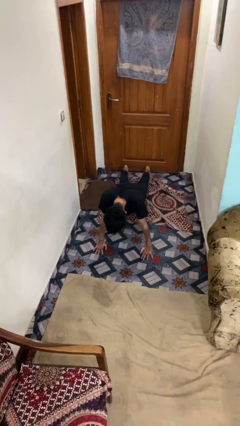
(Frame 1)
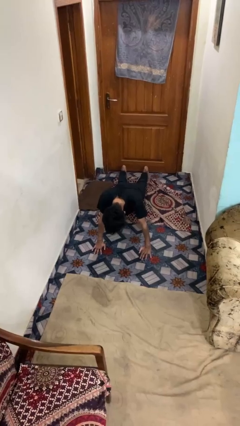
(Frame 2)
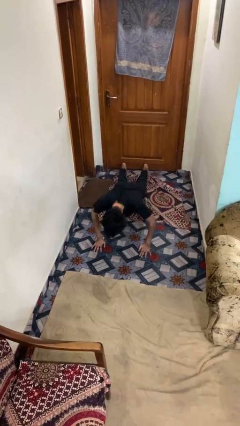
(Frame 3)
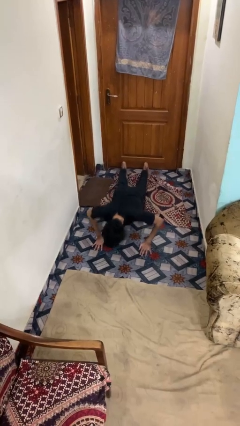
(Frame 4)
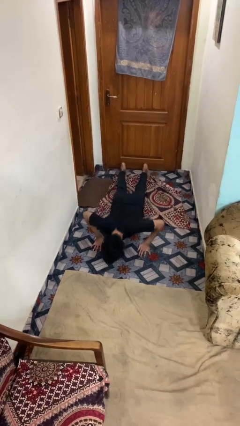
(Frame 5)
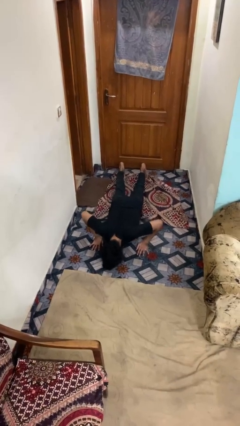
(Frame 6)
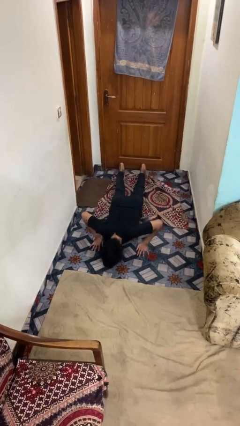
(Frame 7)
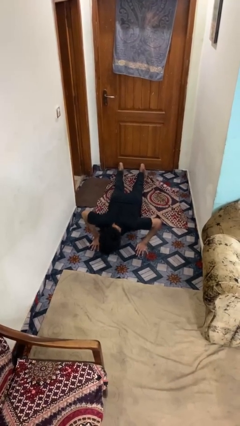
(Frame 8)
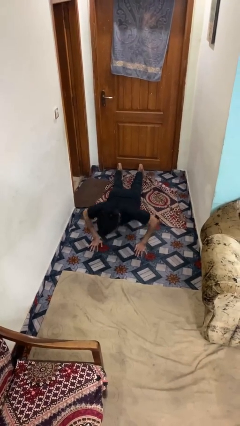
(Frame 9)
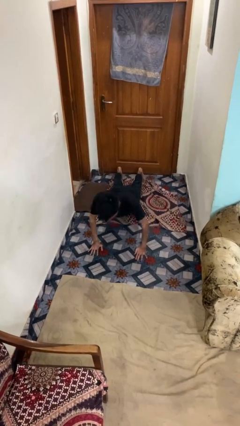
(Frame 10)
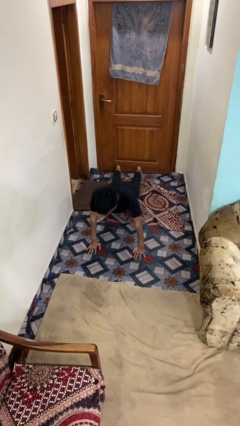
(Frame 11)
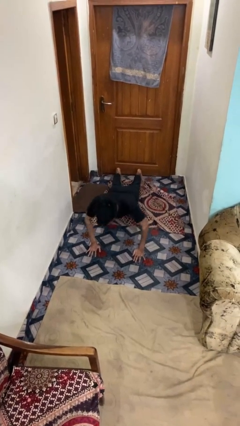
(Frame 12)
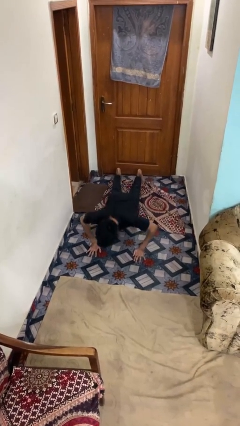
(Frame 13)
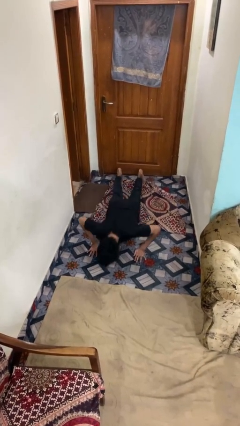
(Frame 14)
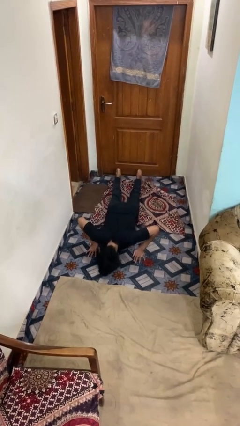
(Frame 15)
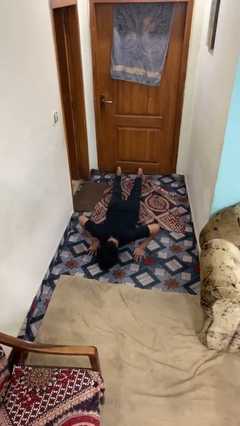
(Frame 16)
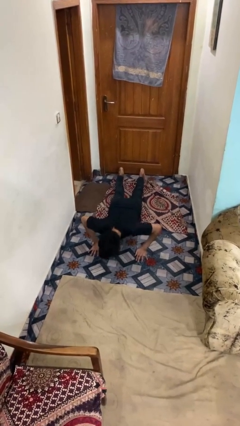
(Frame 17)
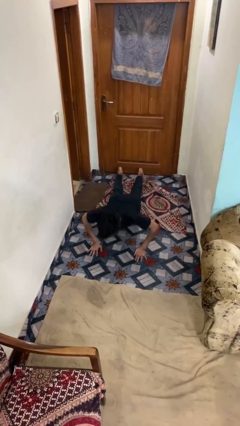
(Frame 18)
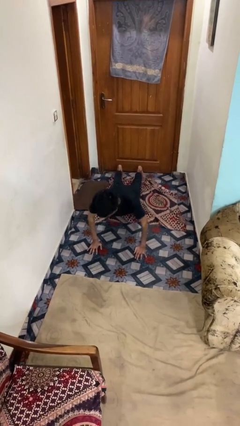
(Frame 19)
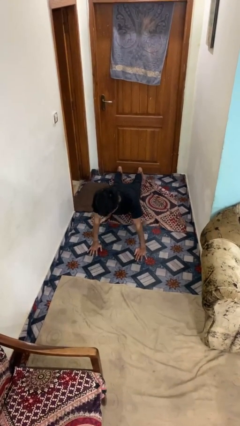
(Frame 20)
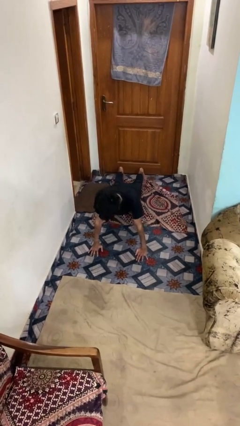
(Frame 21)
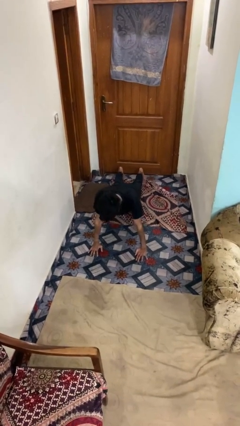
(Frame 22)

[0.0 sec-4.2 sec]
person exercises with pushup

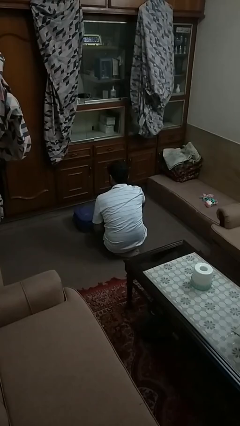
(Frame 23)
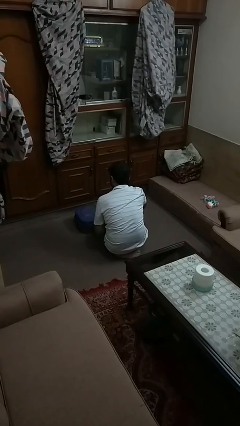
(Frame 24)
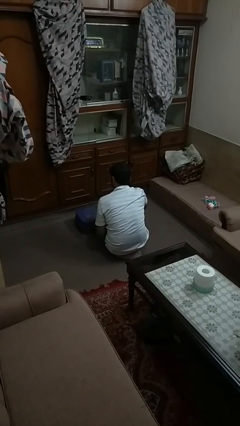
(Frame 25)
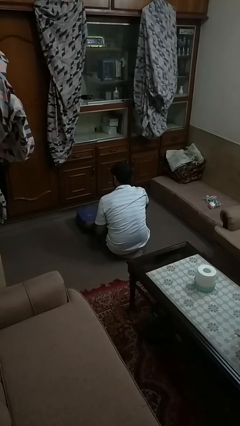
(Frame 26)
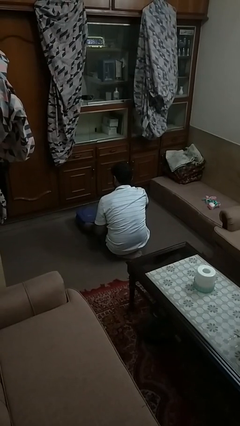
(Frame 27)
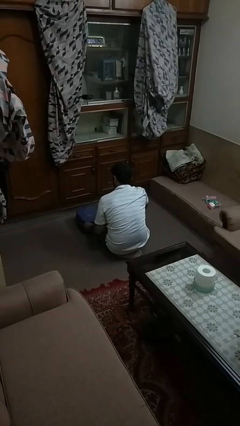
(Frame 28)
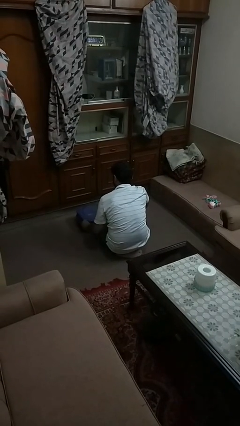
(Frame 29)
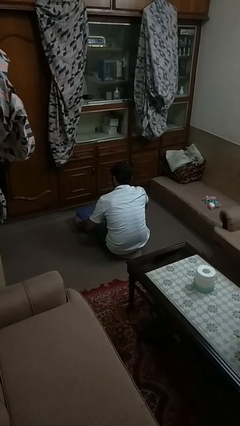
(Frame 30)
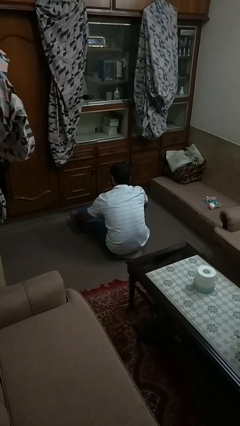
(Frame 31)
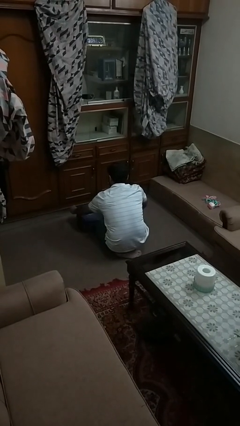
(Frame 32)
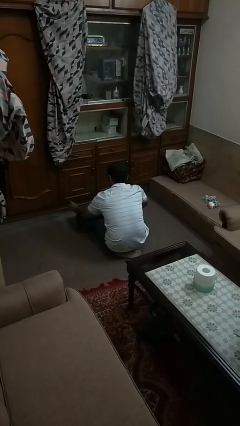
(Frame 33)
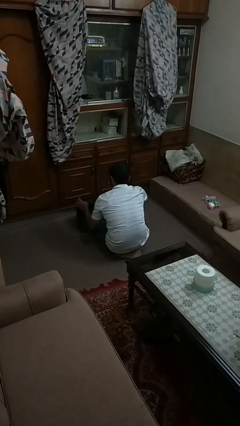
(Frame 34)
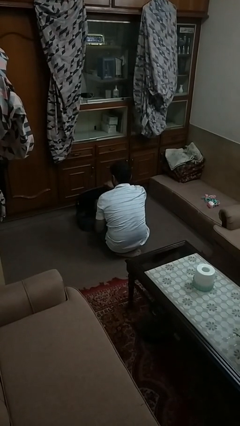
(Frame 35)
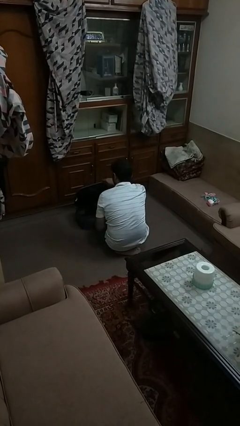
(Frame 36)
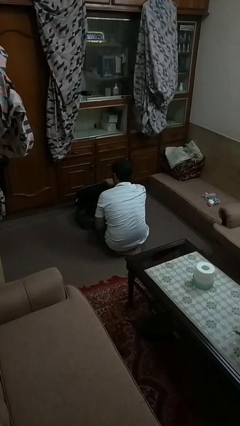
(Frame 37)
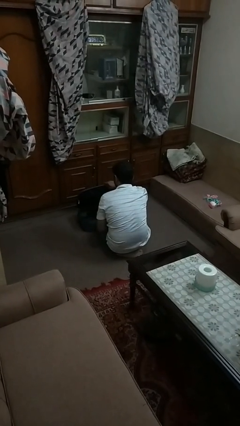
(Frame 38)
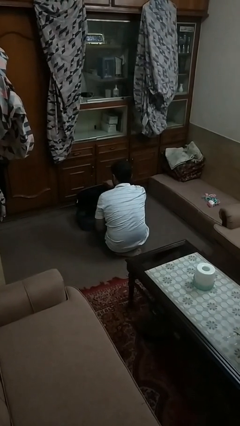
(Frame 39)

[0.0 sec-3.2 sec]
person opens suitcase

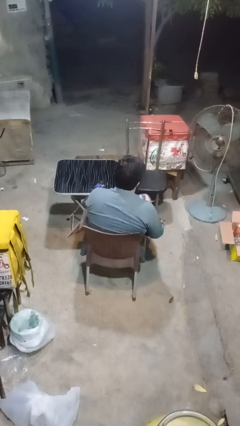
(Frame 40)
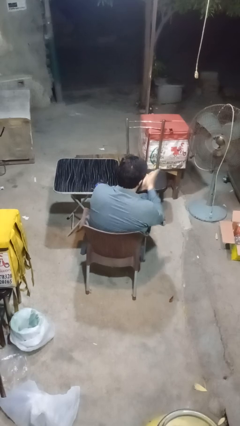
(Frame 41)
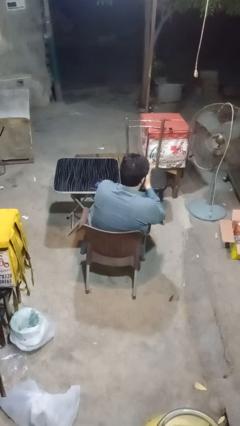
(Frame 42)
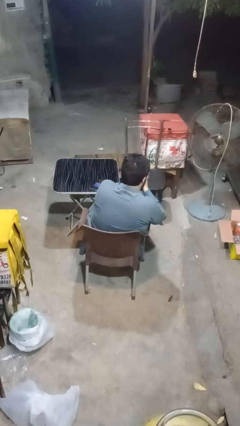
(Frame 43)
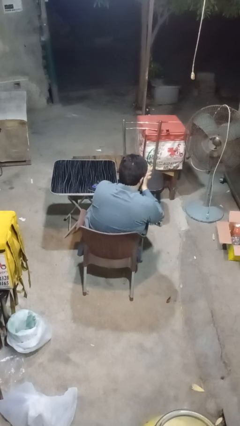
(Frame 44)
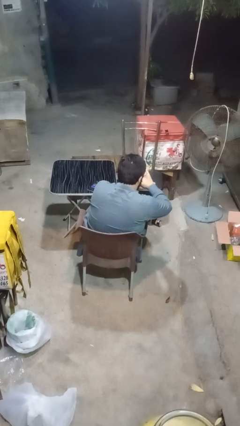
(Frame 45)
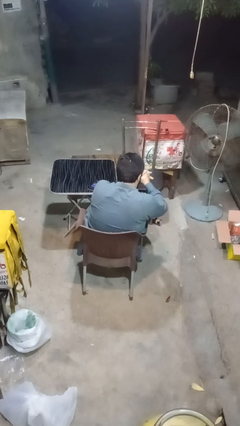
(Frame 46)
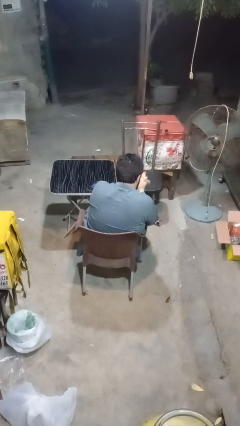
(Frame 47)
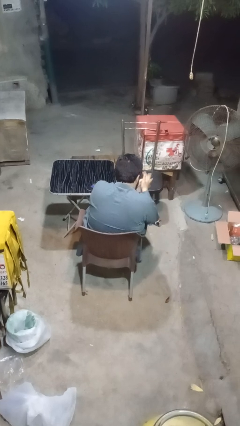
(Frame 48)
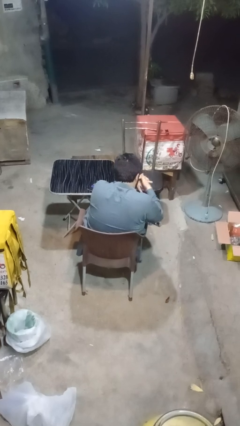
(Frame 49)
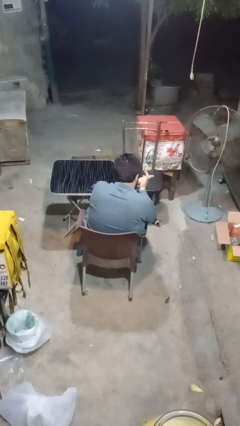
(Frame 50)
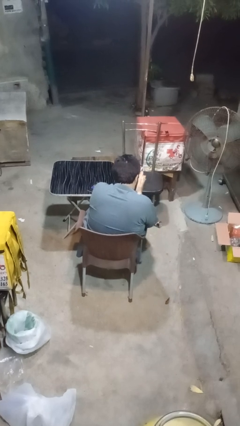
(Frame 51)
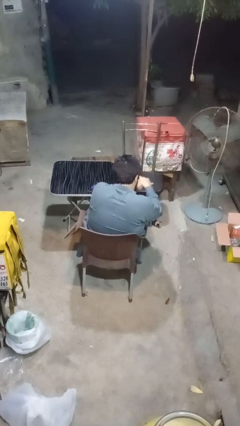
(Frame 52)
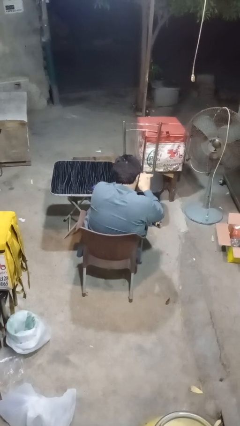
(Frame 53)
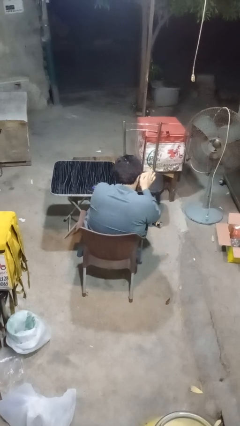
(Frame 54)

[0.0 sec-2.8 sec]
person blows into hands

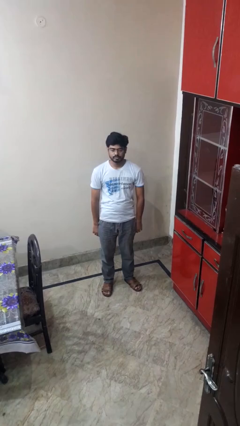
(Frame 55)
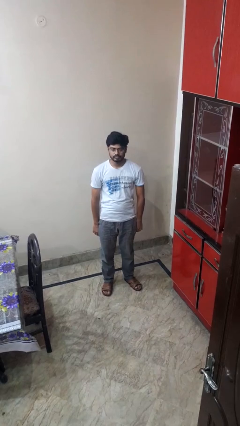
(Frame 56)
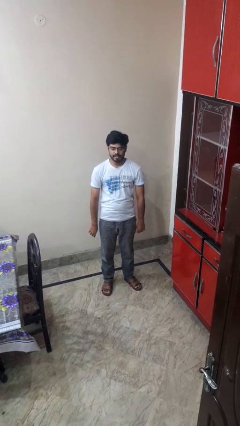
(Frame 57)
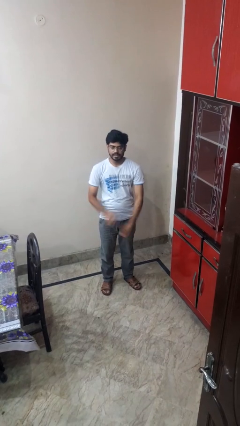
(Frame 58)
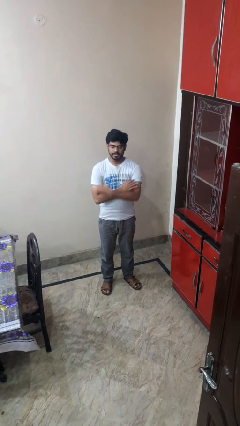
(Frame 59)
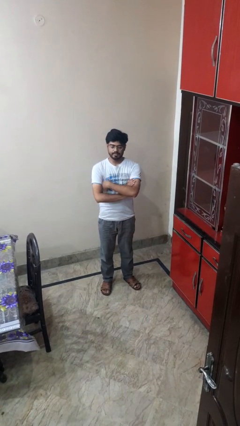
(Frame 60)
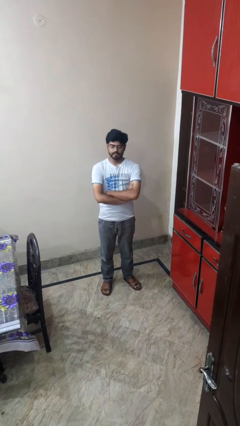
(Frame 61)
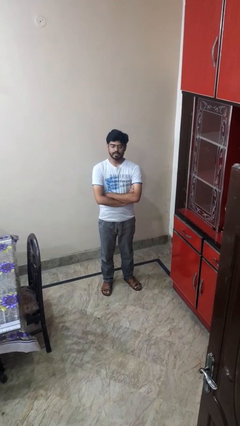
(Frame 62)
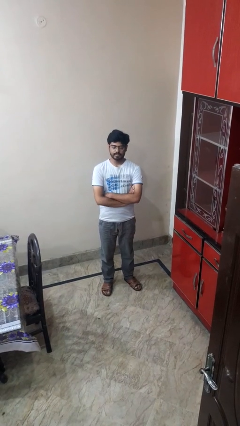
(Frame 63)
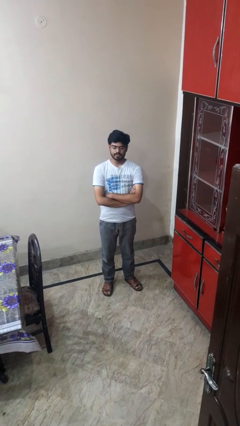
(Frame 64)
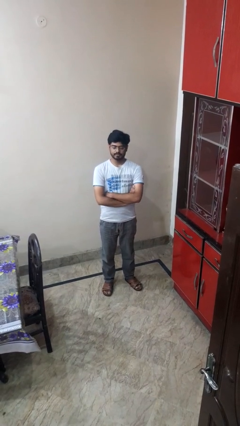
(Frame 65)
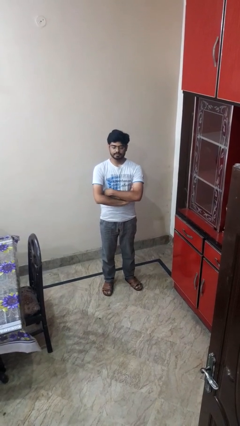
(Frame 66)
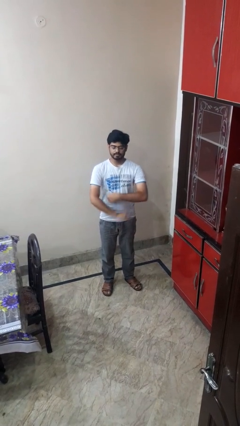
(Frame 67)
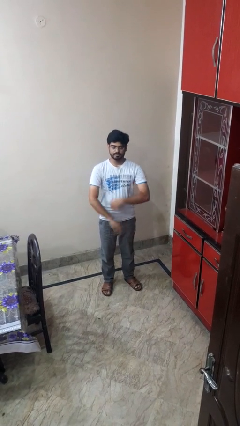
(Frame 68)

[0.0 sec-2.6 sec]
person crosses arms

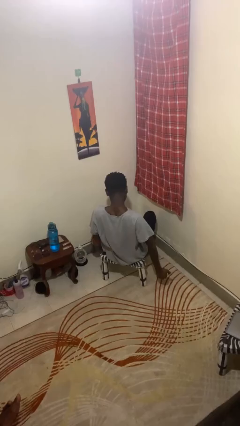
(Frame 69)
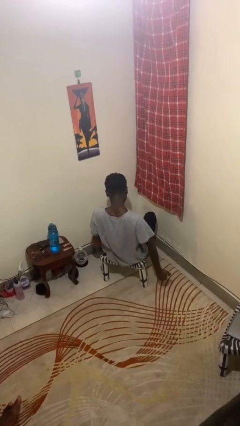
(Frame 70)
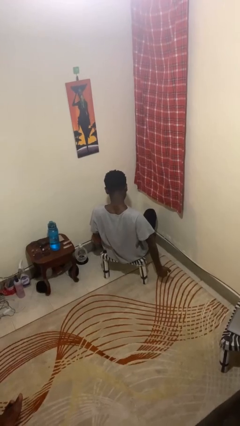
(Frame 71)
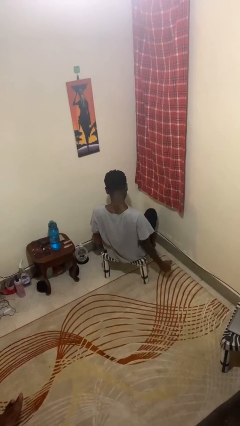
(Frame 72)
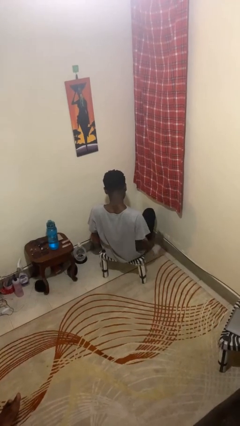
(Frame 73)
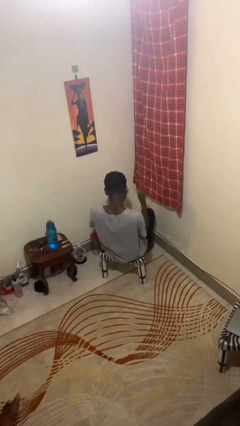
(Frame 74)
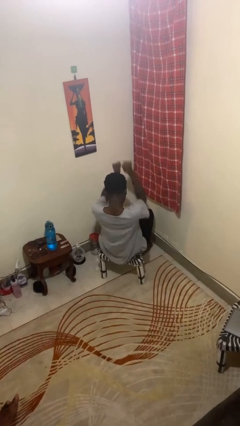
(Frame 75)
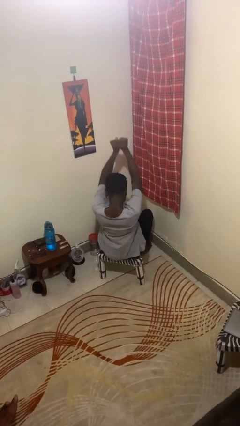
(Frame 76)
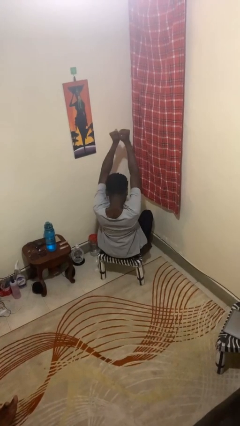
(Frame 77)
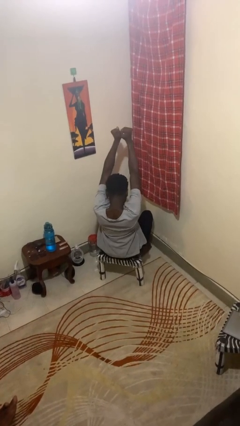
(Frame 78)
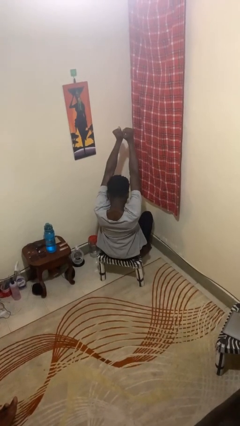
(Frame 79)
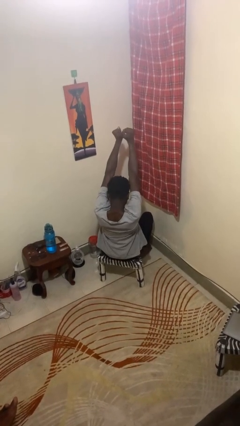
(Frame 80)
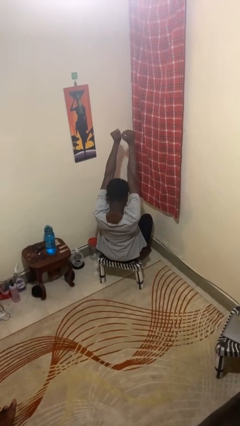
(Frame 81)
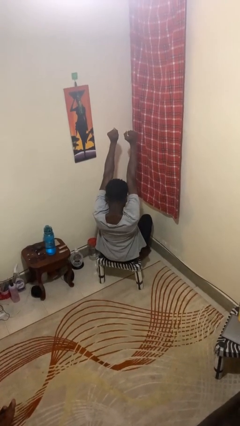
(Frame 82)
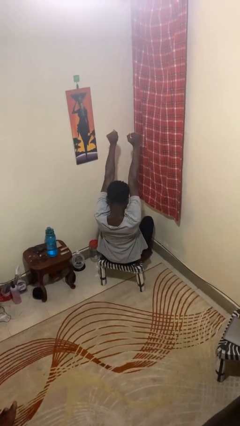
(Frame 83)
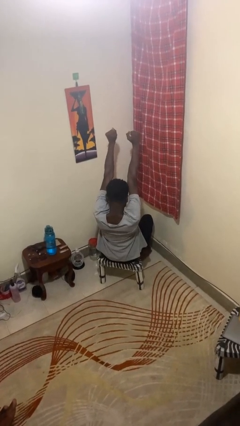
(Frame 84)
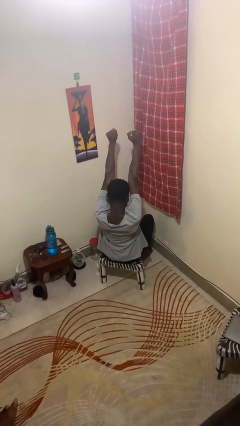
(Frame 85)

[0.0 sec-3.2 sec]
person stretches arms over head

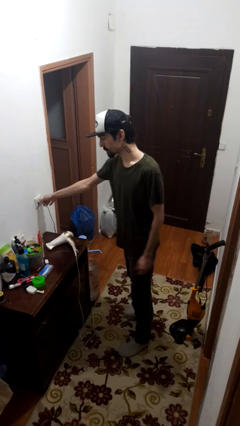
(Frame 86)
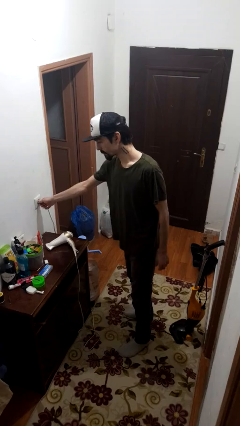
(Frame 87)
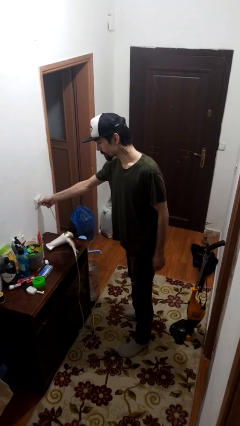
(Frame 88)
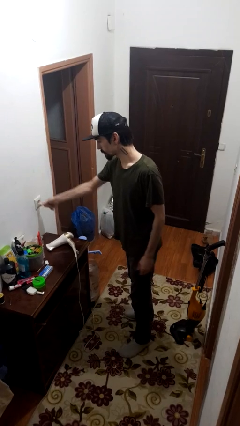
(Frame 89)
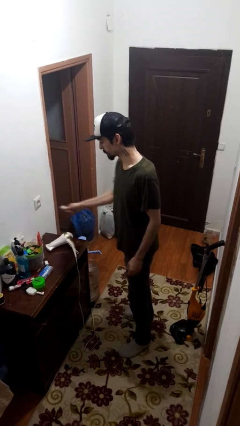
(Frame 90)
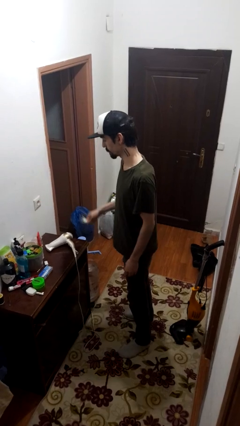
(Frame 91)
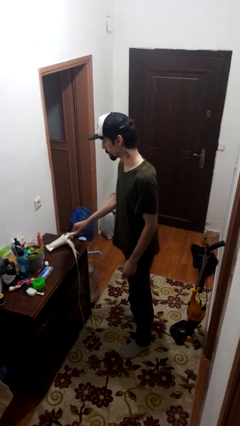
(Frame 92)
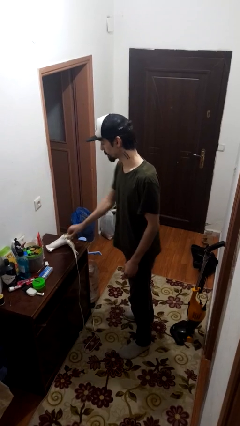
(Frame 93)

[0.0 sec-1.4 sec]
person unplugs from electrical socket
